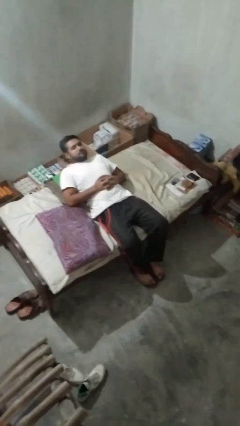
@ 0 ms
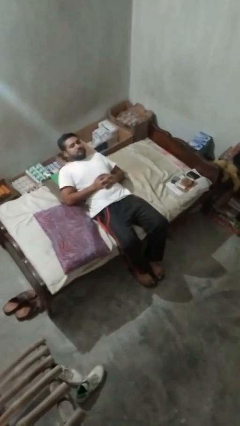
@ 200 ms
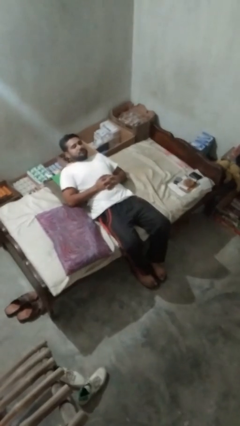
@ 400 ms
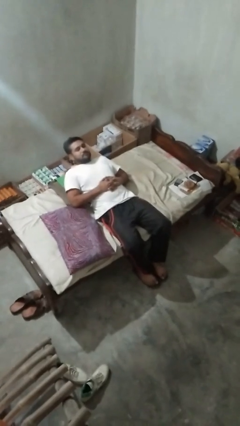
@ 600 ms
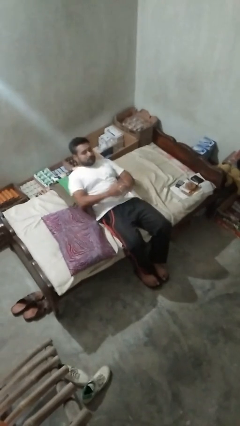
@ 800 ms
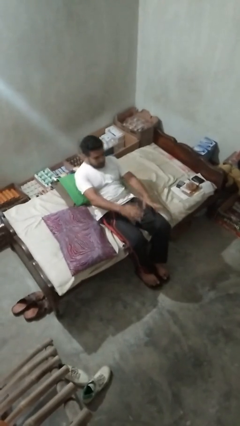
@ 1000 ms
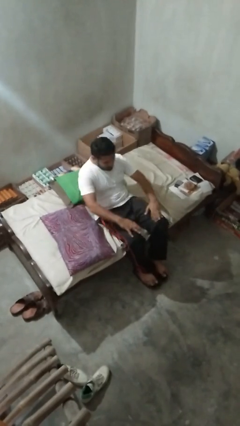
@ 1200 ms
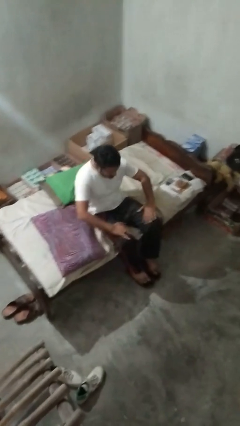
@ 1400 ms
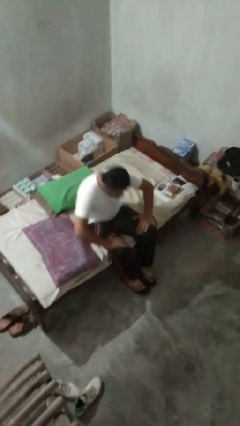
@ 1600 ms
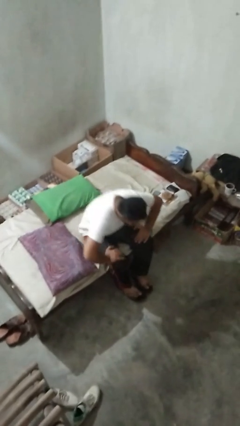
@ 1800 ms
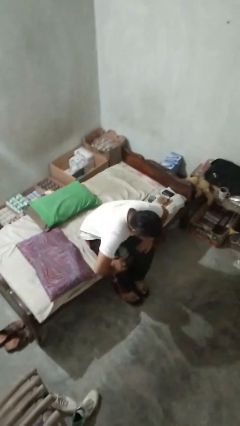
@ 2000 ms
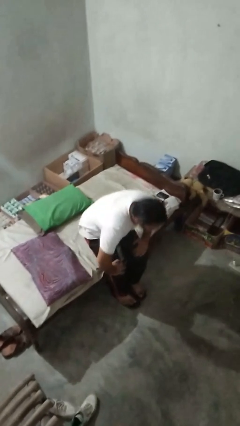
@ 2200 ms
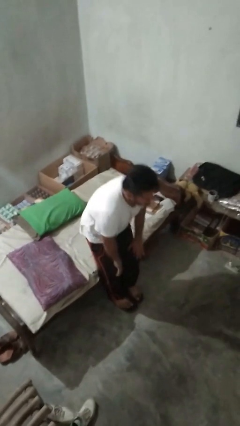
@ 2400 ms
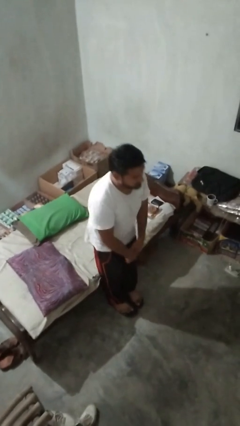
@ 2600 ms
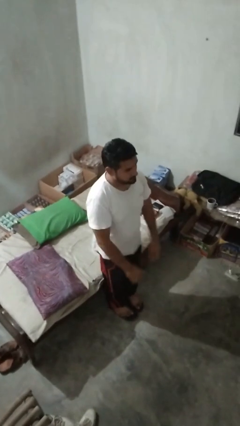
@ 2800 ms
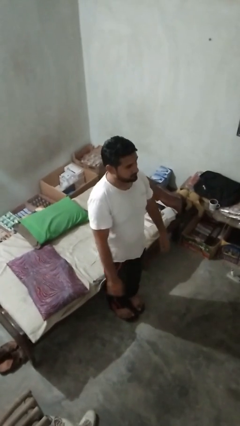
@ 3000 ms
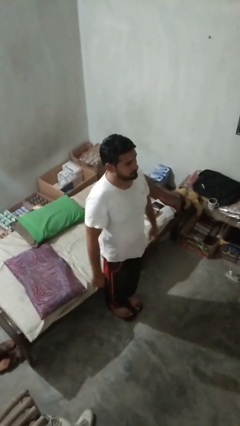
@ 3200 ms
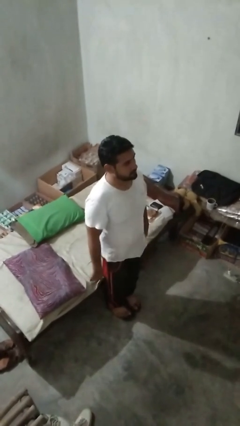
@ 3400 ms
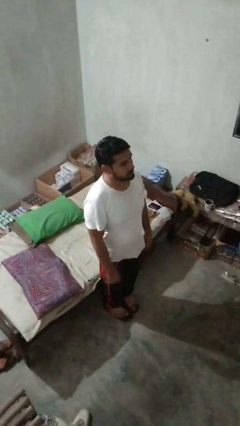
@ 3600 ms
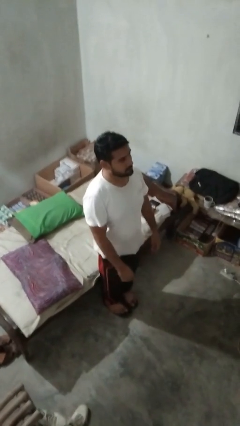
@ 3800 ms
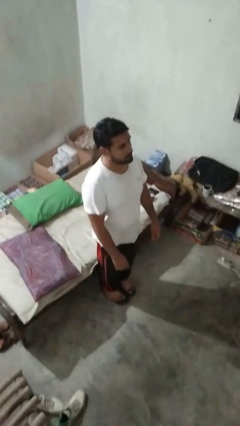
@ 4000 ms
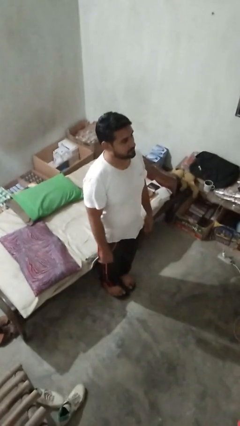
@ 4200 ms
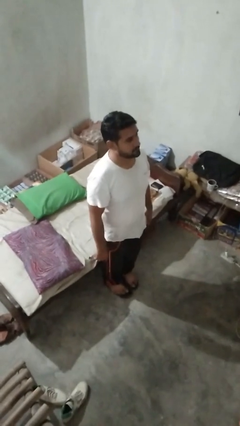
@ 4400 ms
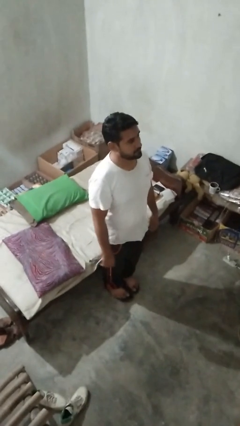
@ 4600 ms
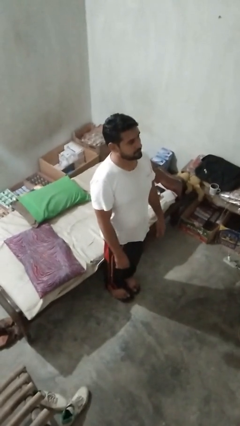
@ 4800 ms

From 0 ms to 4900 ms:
person stands up

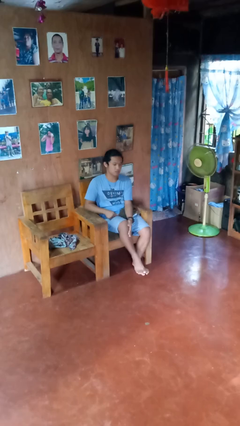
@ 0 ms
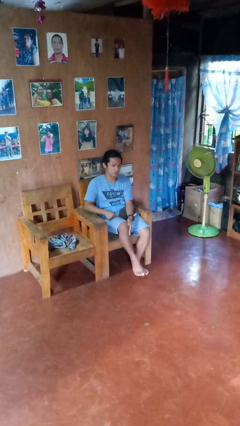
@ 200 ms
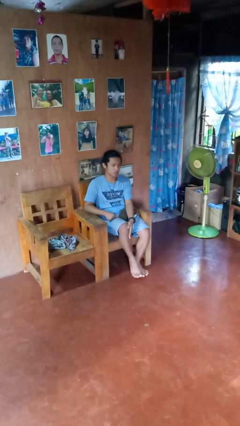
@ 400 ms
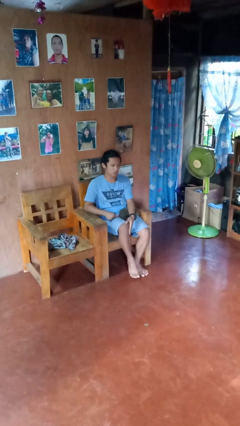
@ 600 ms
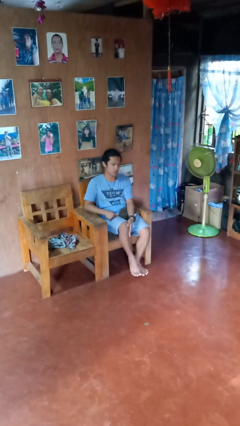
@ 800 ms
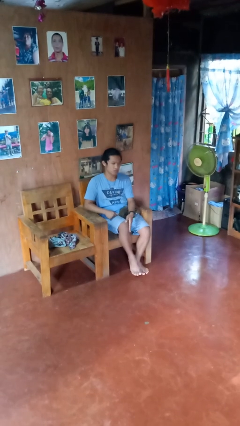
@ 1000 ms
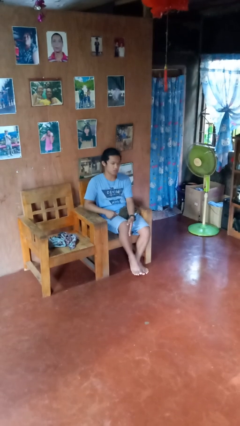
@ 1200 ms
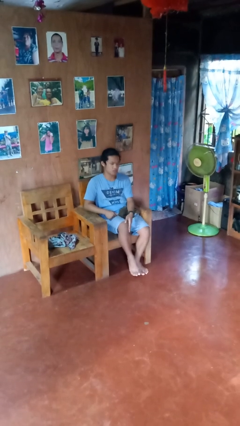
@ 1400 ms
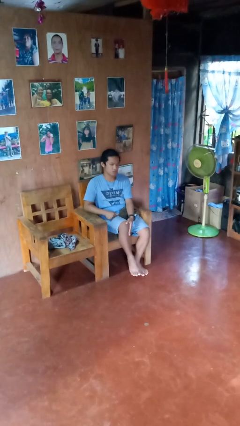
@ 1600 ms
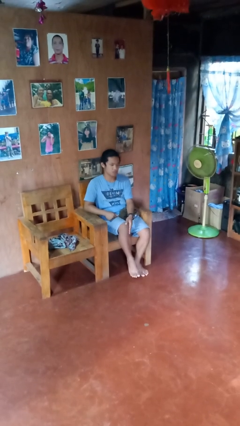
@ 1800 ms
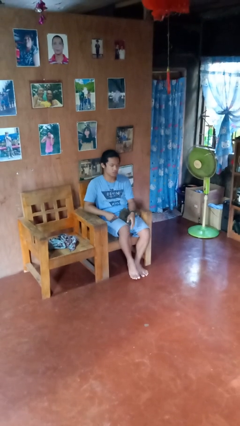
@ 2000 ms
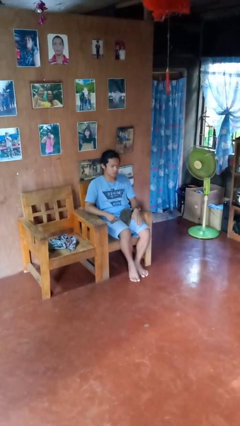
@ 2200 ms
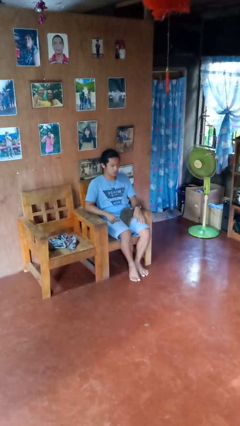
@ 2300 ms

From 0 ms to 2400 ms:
person swats bug

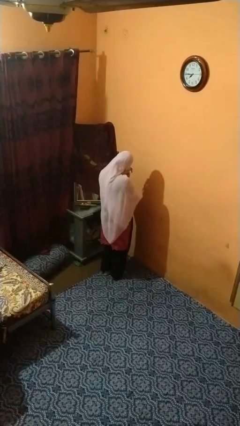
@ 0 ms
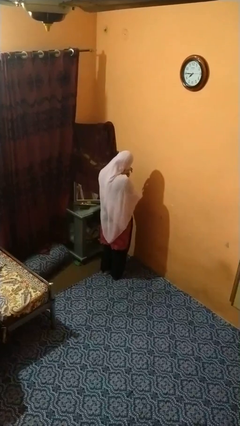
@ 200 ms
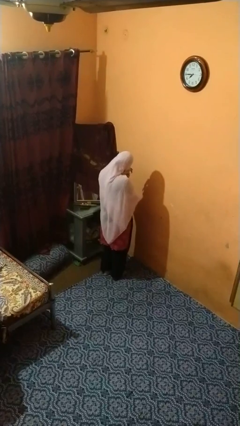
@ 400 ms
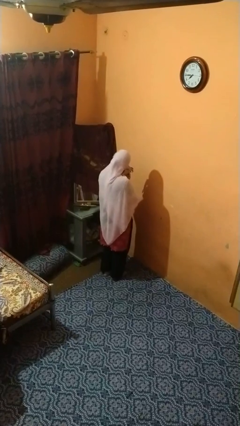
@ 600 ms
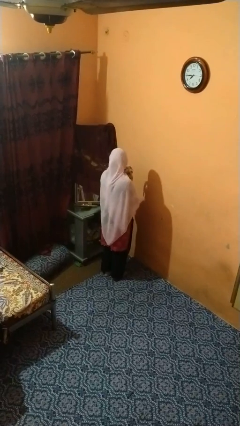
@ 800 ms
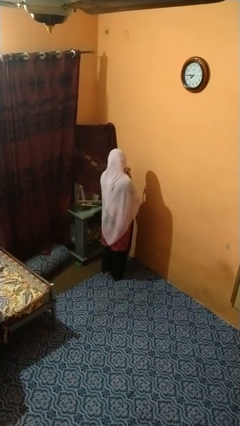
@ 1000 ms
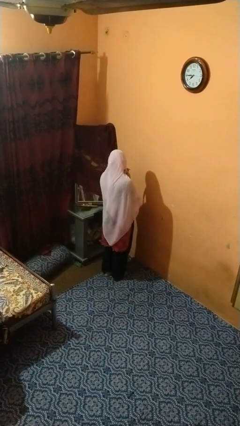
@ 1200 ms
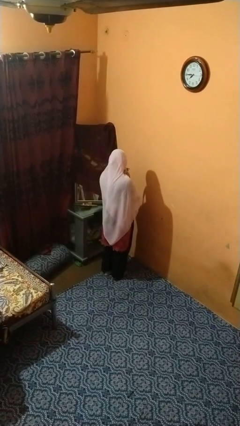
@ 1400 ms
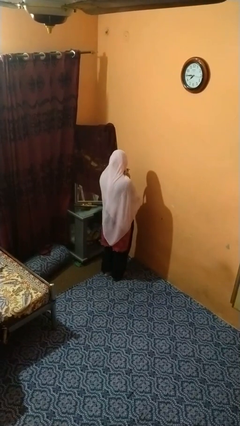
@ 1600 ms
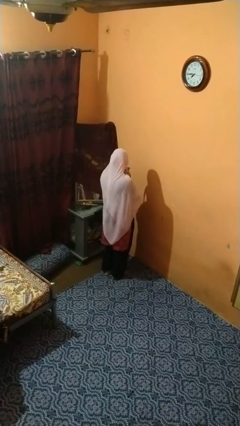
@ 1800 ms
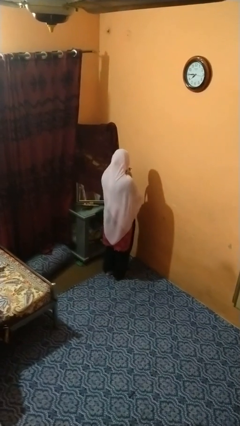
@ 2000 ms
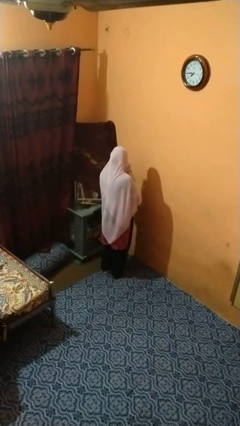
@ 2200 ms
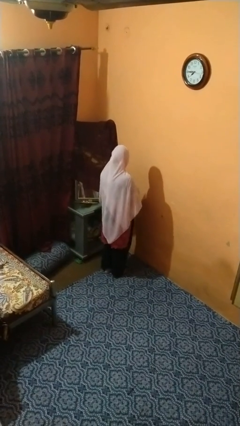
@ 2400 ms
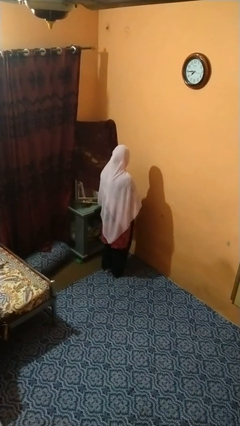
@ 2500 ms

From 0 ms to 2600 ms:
person hugs stuffed animal

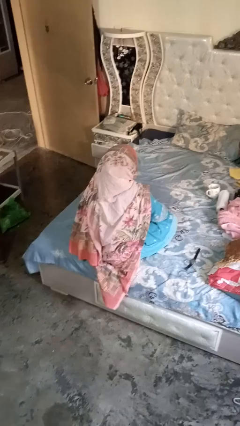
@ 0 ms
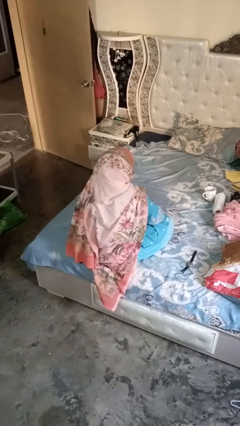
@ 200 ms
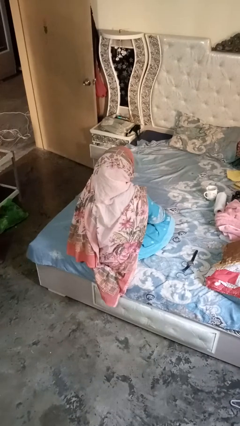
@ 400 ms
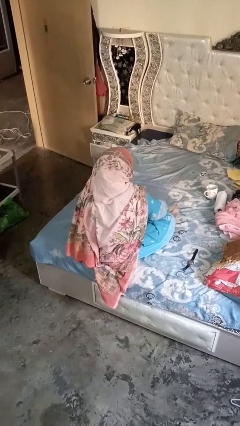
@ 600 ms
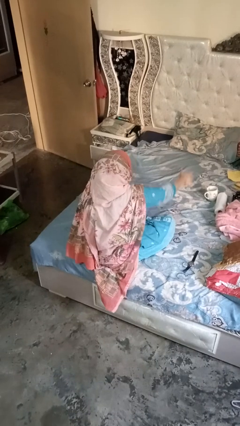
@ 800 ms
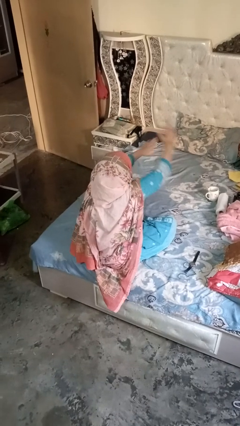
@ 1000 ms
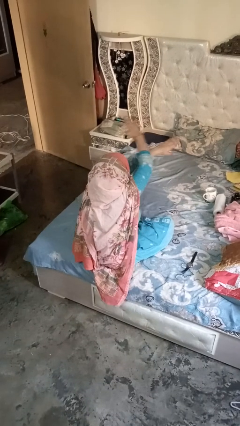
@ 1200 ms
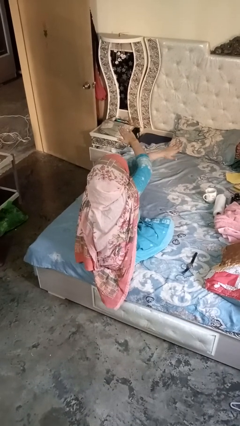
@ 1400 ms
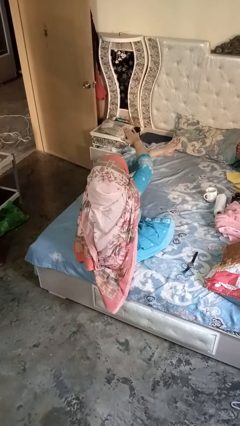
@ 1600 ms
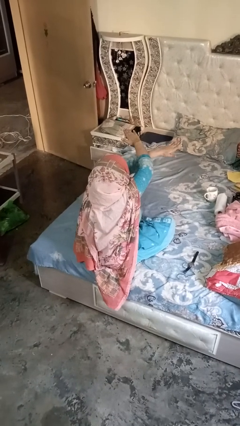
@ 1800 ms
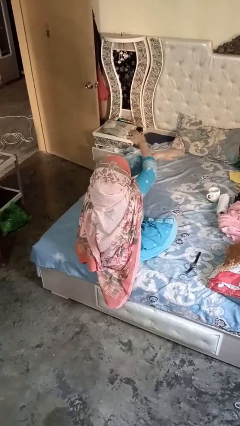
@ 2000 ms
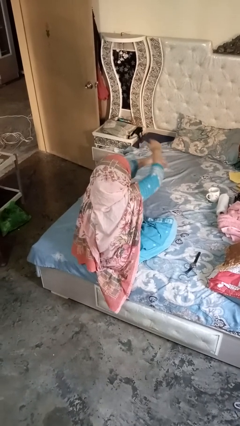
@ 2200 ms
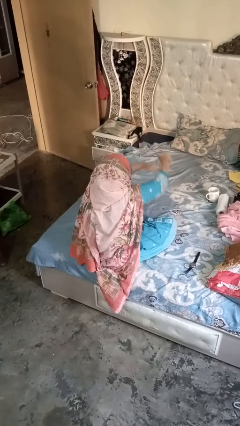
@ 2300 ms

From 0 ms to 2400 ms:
person gestures arms x

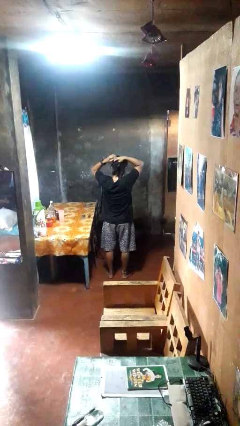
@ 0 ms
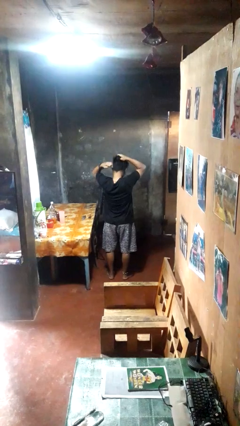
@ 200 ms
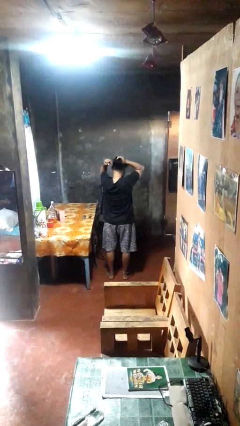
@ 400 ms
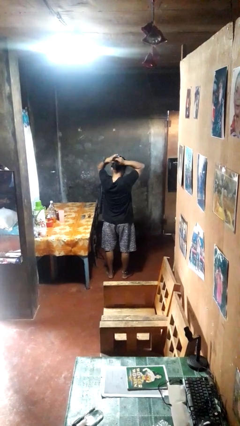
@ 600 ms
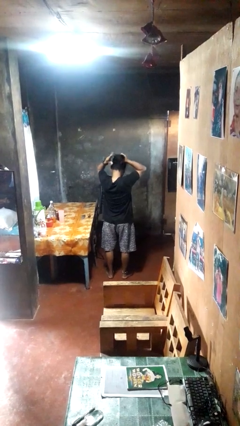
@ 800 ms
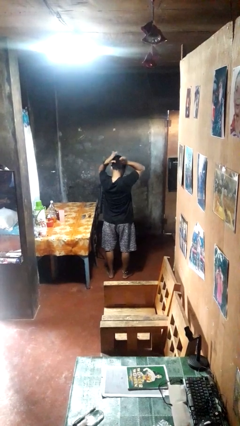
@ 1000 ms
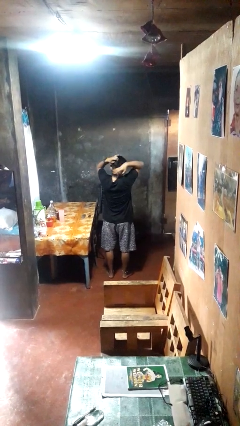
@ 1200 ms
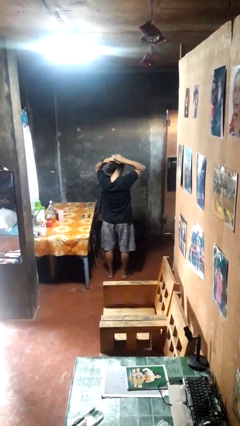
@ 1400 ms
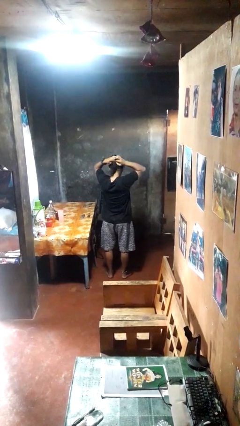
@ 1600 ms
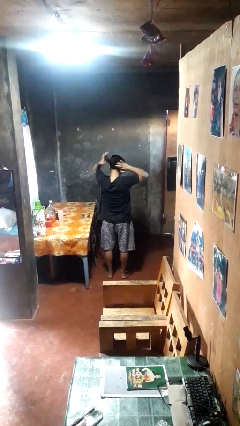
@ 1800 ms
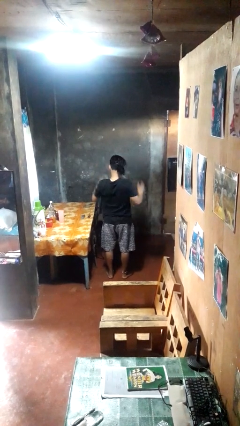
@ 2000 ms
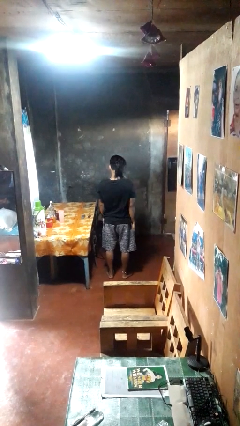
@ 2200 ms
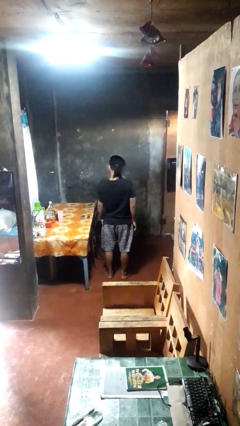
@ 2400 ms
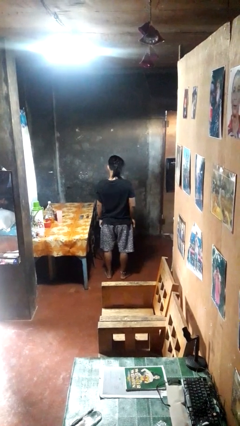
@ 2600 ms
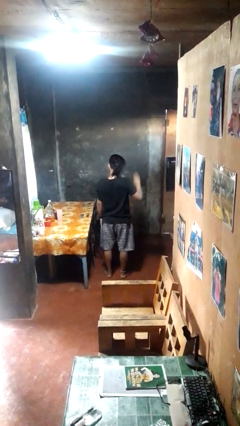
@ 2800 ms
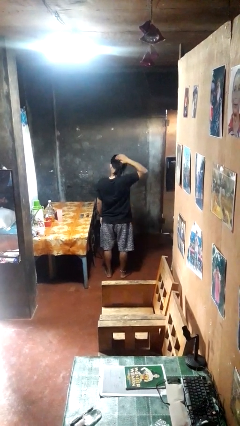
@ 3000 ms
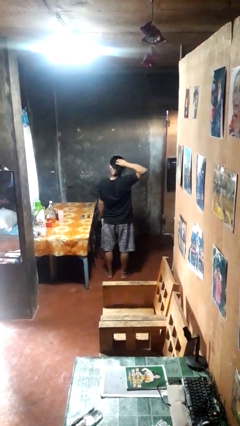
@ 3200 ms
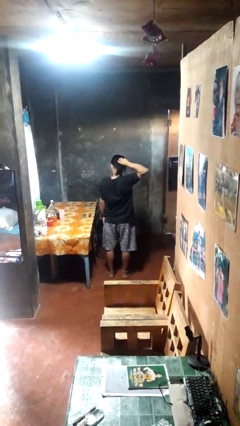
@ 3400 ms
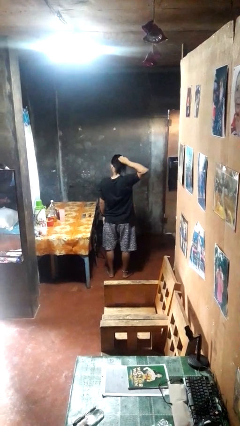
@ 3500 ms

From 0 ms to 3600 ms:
person puts hair in ponytail

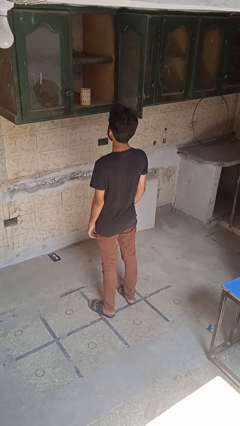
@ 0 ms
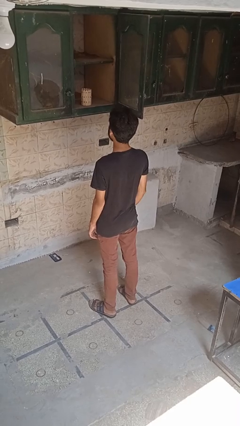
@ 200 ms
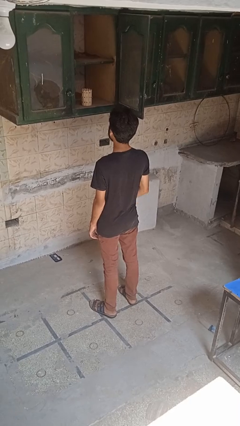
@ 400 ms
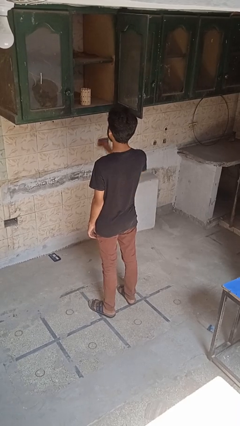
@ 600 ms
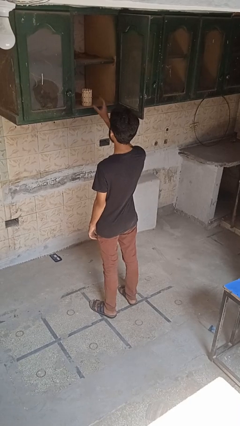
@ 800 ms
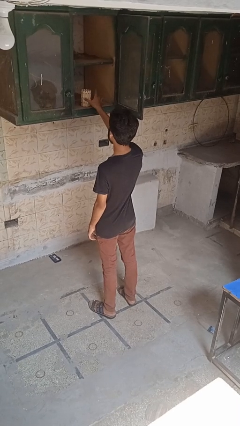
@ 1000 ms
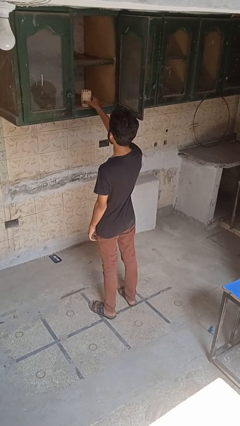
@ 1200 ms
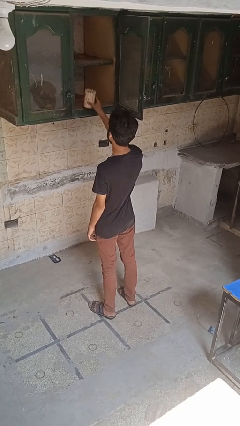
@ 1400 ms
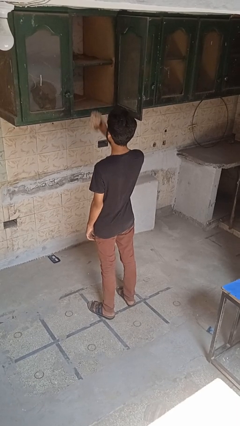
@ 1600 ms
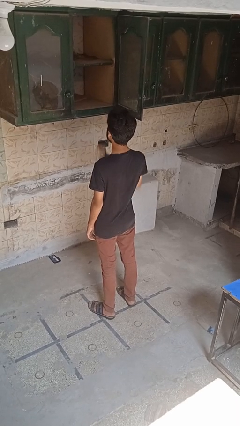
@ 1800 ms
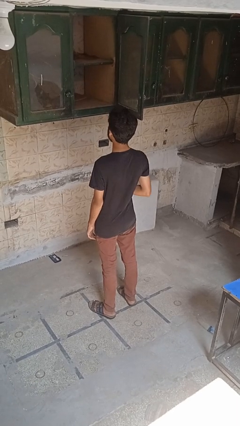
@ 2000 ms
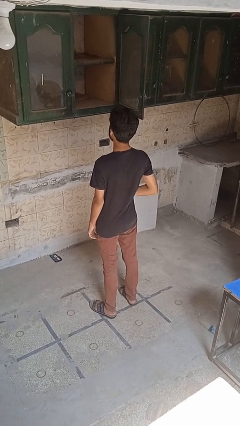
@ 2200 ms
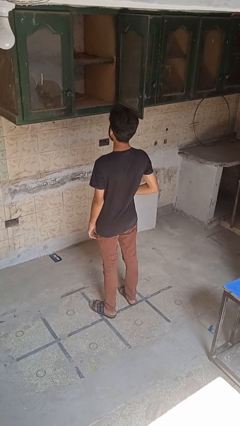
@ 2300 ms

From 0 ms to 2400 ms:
person picks up object from cabinet
